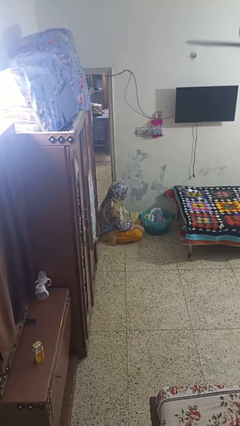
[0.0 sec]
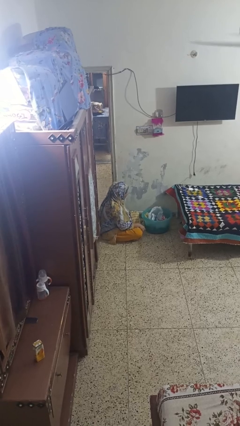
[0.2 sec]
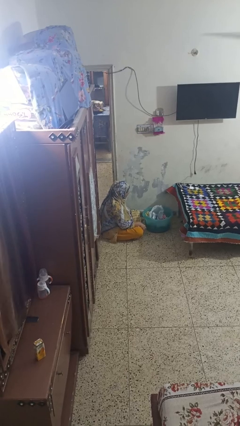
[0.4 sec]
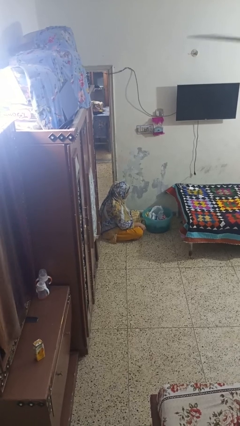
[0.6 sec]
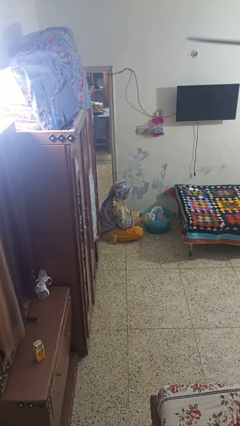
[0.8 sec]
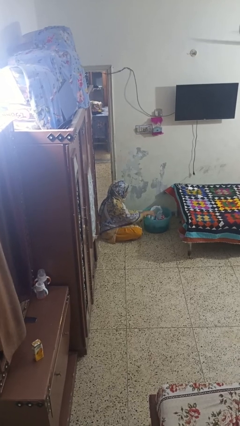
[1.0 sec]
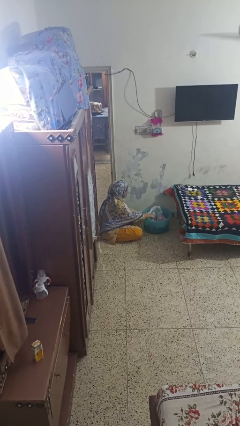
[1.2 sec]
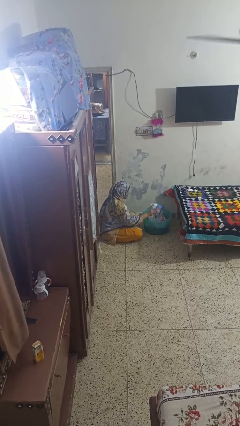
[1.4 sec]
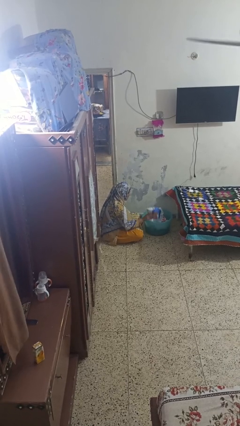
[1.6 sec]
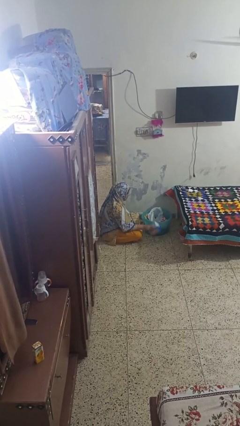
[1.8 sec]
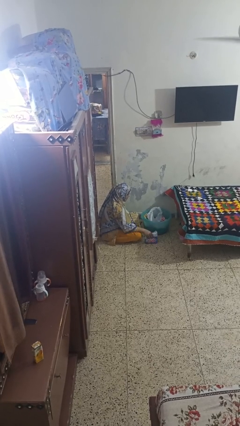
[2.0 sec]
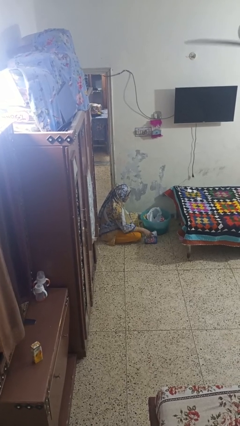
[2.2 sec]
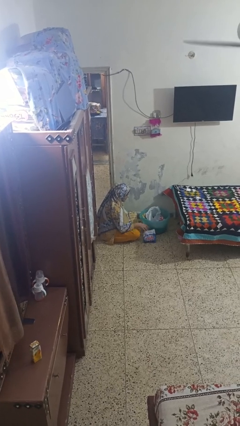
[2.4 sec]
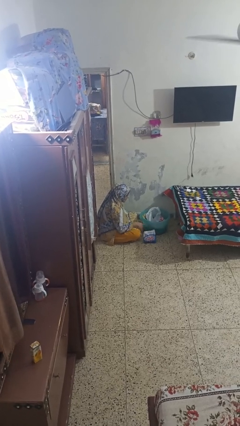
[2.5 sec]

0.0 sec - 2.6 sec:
person takes object from basket

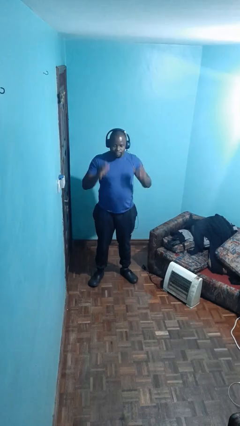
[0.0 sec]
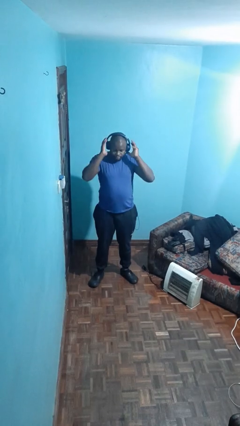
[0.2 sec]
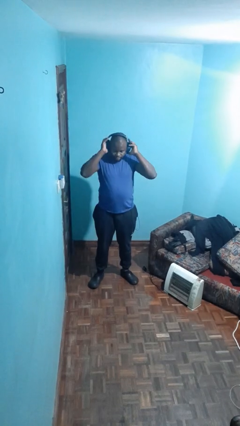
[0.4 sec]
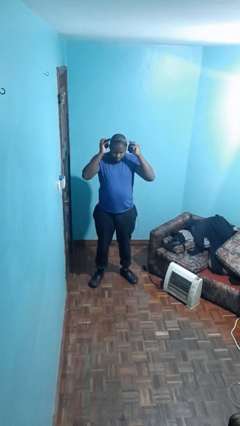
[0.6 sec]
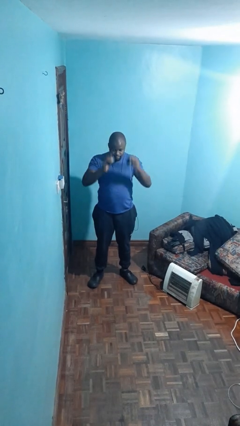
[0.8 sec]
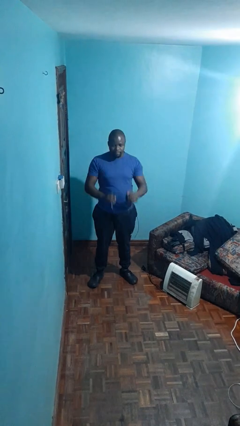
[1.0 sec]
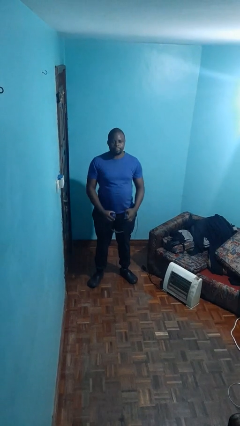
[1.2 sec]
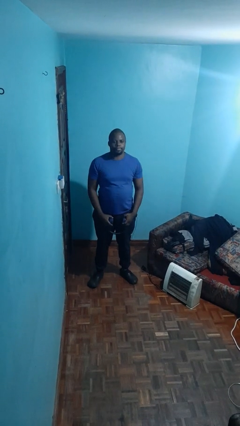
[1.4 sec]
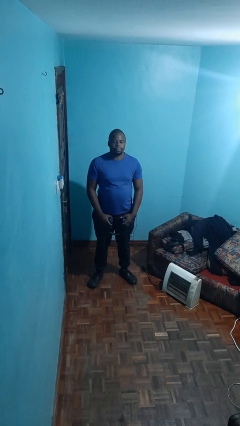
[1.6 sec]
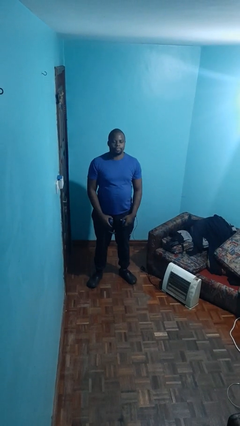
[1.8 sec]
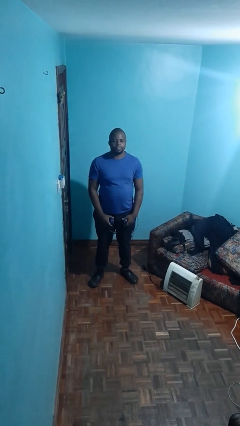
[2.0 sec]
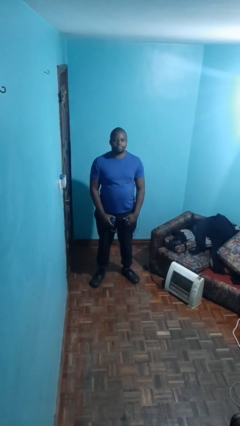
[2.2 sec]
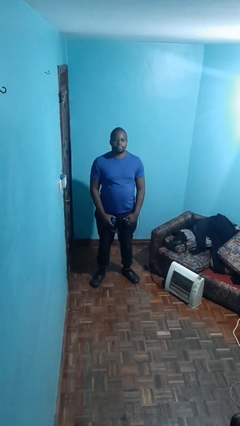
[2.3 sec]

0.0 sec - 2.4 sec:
person takes off headphones

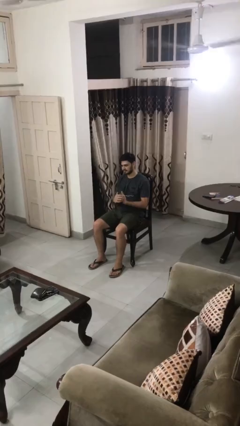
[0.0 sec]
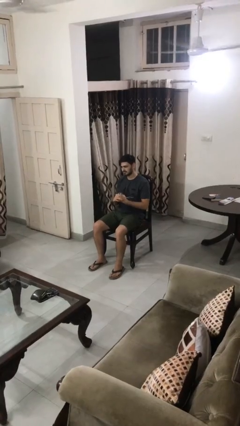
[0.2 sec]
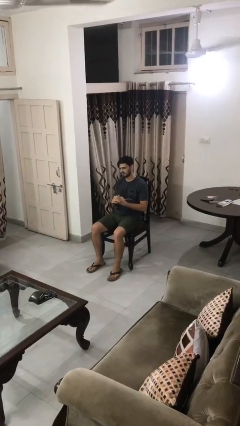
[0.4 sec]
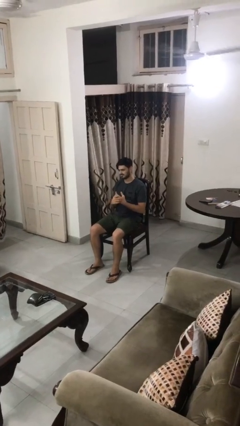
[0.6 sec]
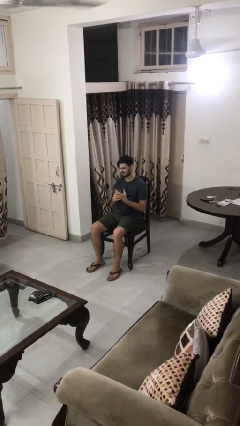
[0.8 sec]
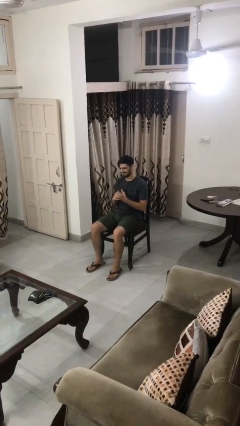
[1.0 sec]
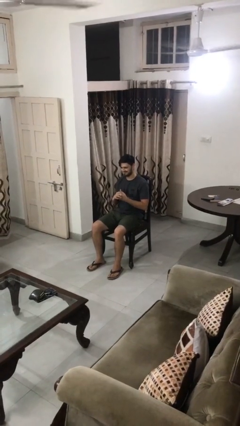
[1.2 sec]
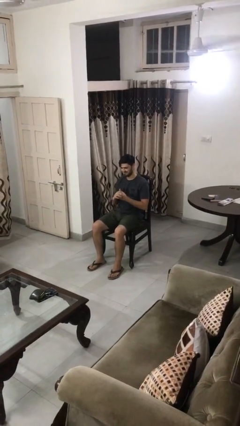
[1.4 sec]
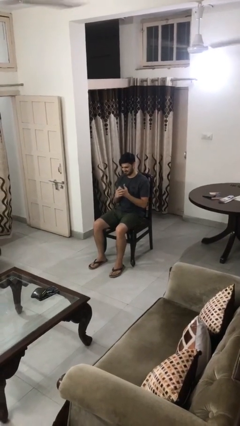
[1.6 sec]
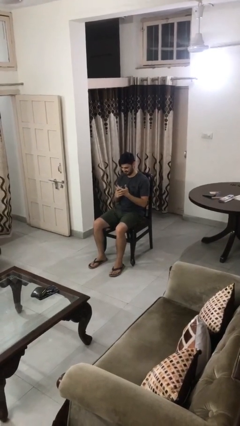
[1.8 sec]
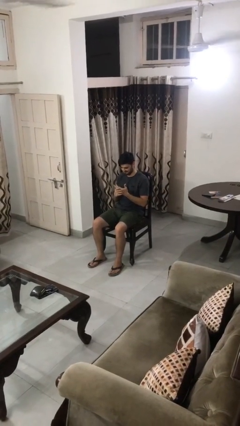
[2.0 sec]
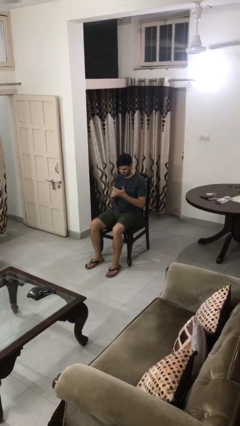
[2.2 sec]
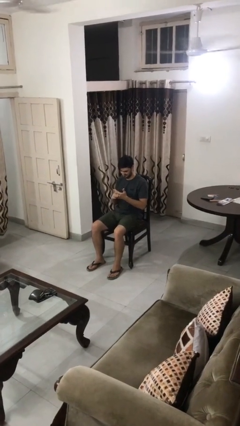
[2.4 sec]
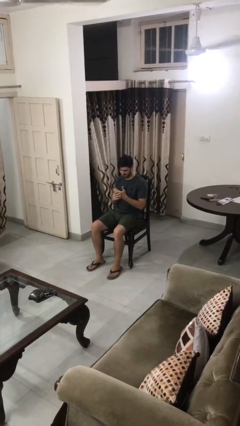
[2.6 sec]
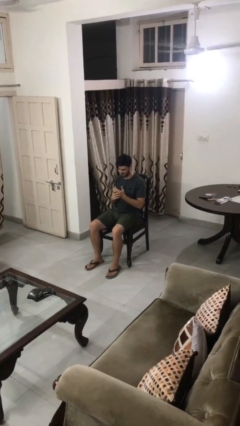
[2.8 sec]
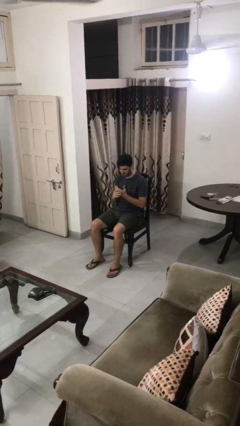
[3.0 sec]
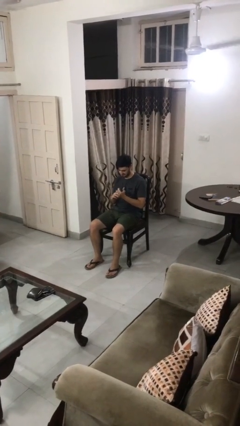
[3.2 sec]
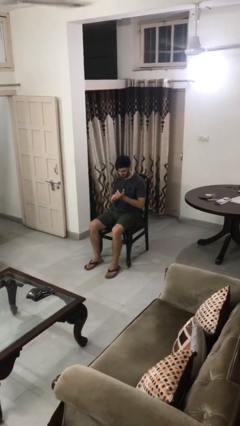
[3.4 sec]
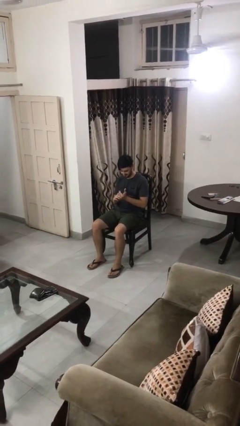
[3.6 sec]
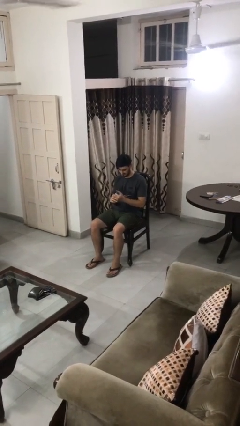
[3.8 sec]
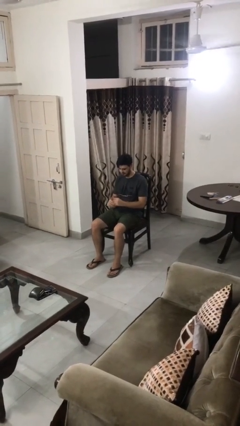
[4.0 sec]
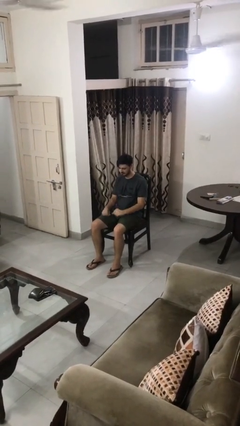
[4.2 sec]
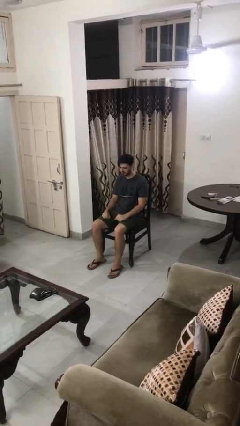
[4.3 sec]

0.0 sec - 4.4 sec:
person cracks knuckles

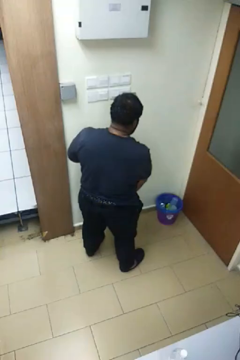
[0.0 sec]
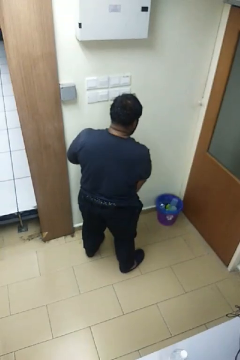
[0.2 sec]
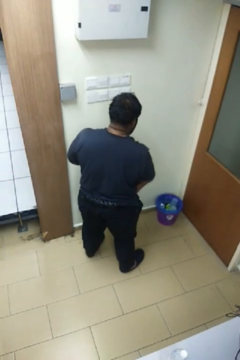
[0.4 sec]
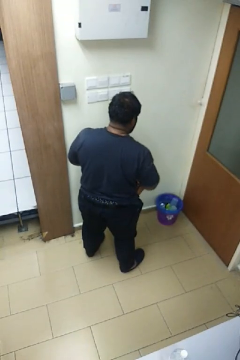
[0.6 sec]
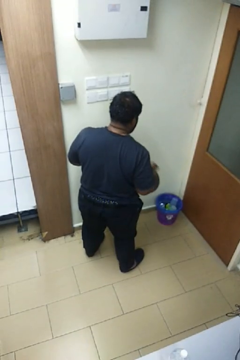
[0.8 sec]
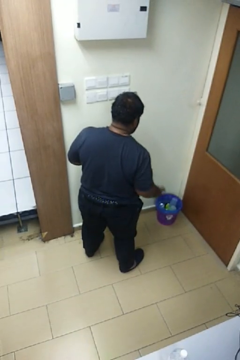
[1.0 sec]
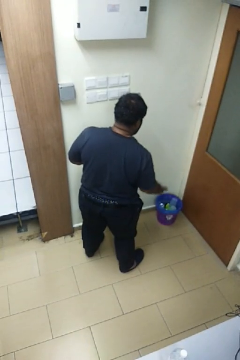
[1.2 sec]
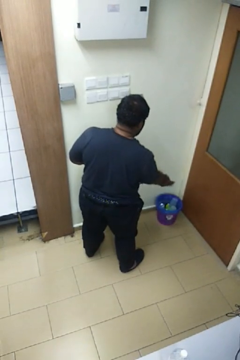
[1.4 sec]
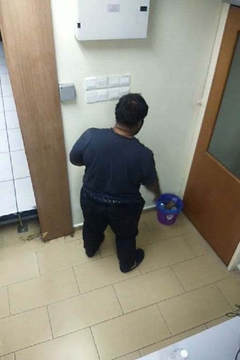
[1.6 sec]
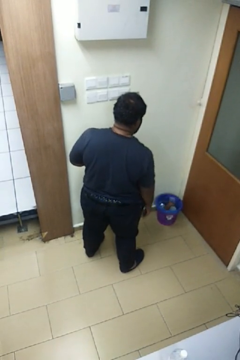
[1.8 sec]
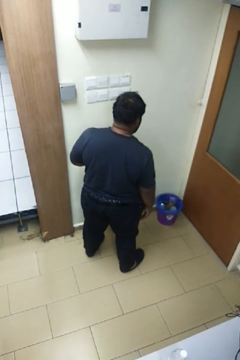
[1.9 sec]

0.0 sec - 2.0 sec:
person discards trash

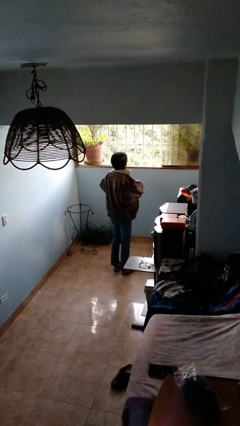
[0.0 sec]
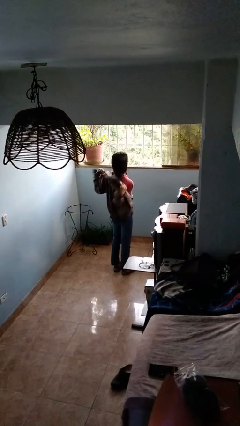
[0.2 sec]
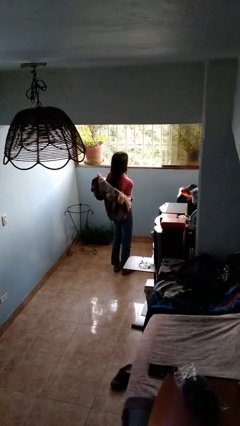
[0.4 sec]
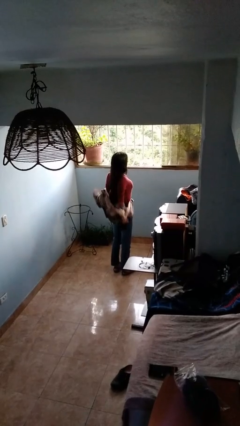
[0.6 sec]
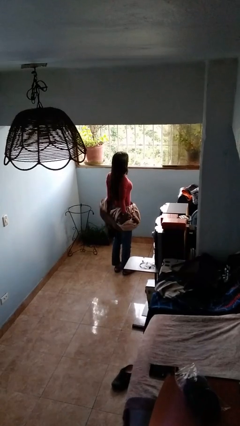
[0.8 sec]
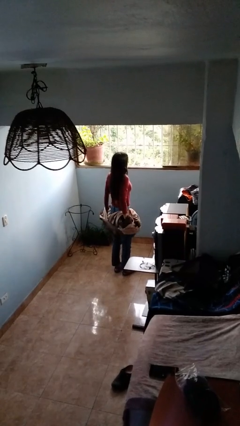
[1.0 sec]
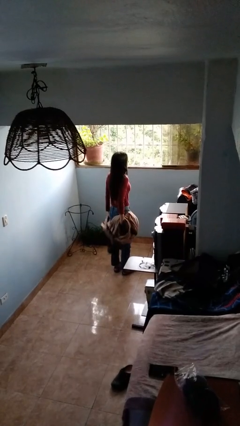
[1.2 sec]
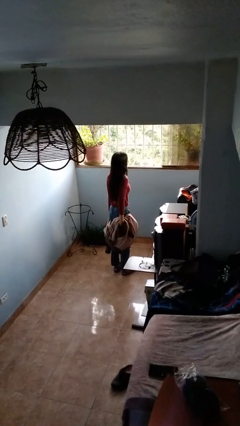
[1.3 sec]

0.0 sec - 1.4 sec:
person takes off jacket

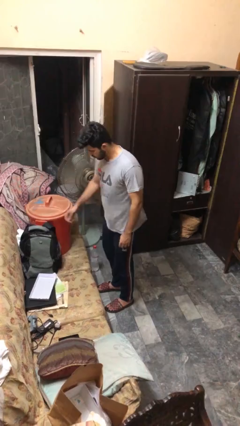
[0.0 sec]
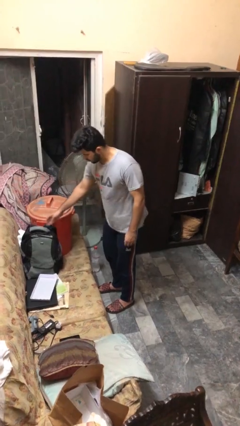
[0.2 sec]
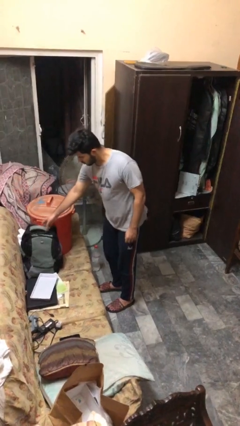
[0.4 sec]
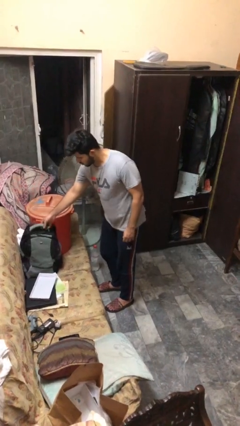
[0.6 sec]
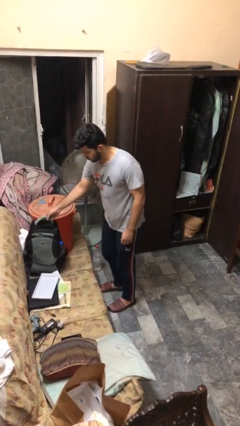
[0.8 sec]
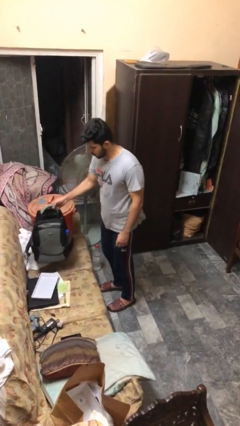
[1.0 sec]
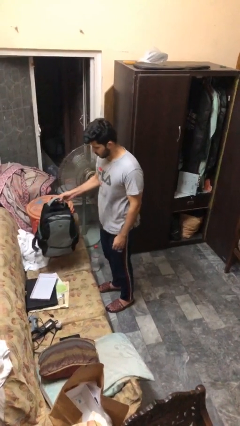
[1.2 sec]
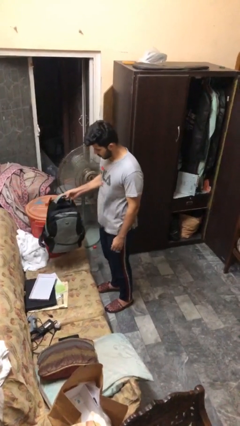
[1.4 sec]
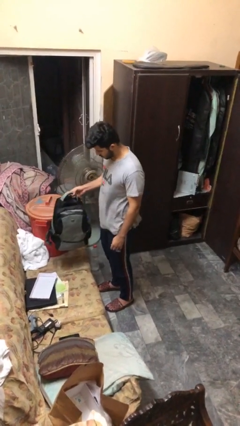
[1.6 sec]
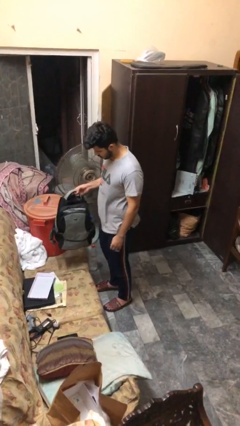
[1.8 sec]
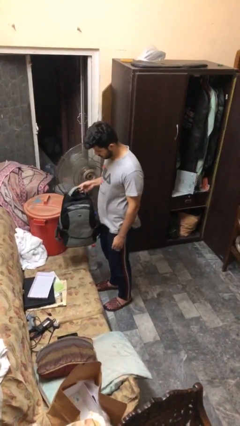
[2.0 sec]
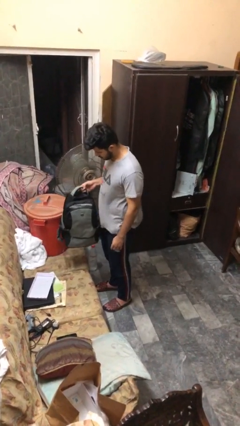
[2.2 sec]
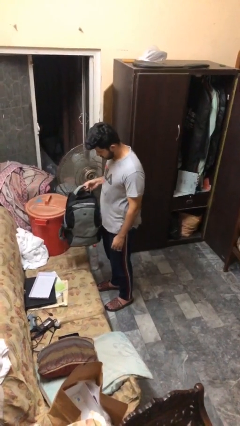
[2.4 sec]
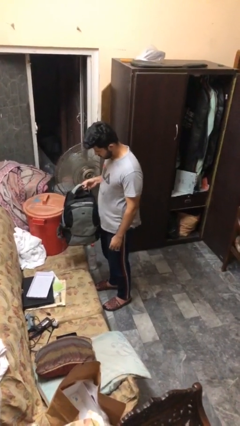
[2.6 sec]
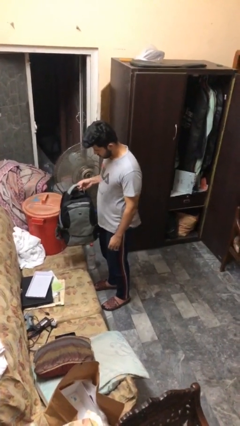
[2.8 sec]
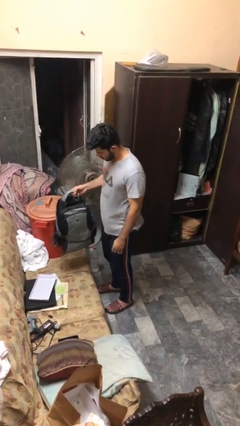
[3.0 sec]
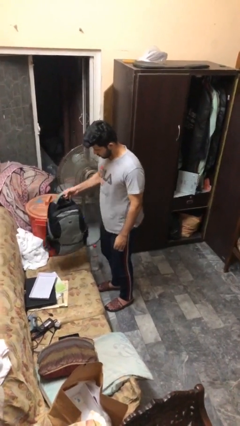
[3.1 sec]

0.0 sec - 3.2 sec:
person picks up object from couch

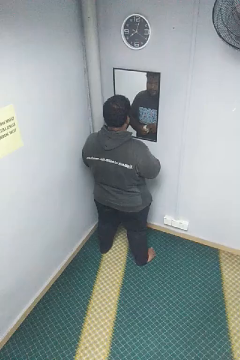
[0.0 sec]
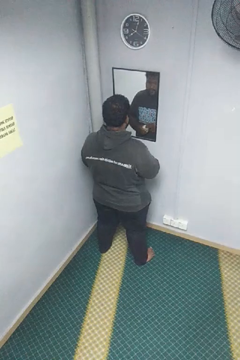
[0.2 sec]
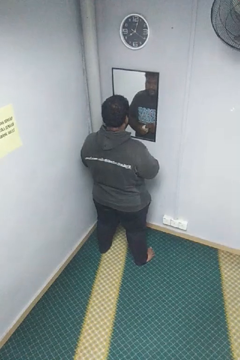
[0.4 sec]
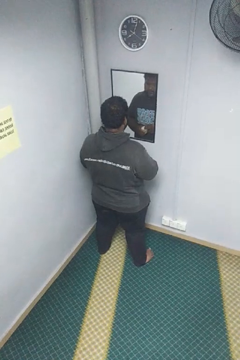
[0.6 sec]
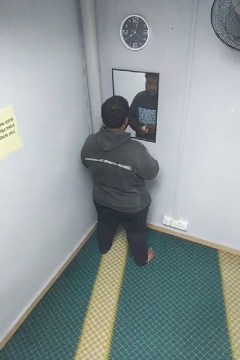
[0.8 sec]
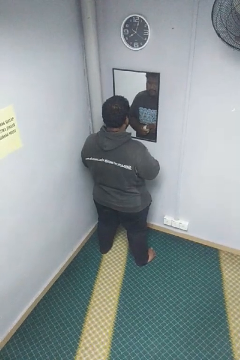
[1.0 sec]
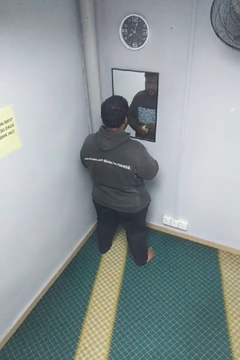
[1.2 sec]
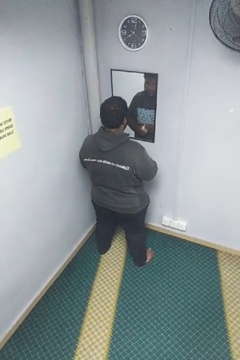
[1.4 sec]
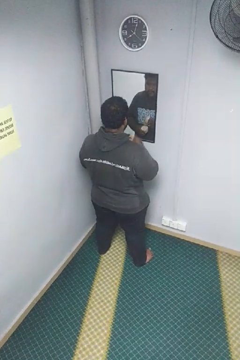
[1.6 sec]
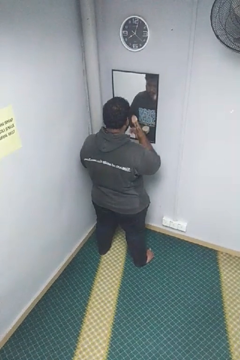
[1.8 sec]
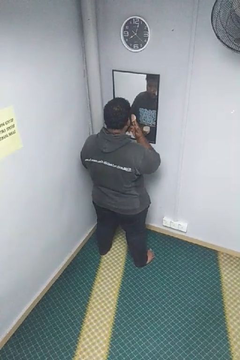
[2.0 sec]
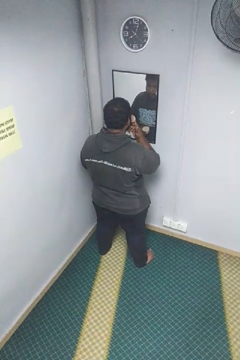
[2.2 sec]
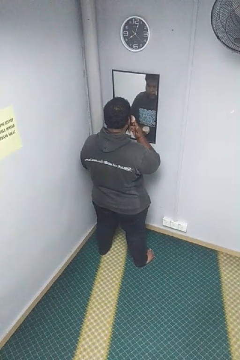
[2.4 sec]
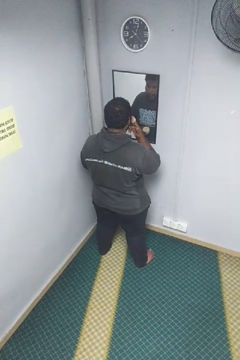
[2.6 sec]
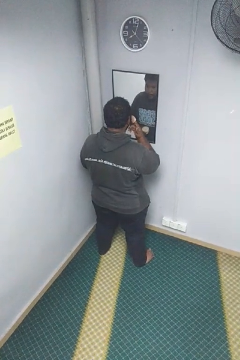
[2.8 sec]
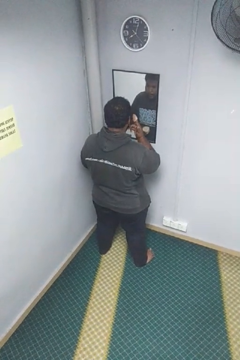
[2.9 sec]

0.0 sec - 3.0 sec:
person applies foundation makeup
